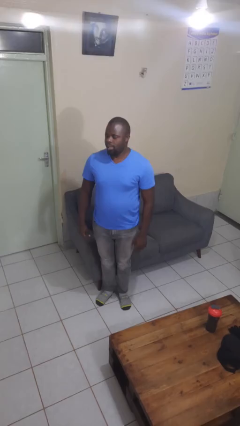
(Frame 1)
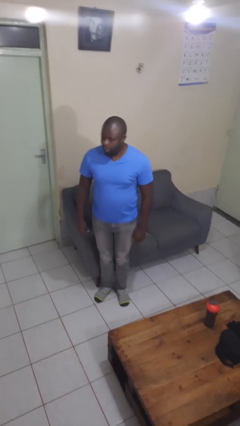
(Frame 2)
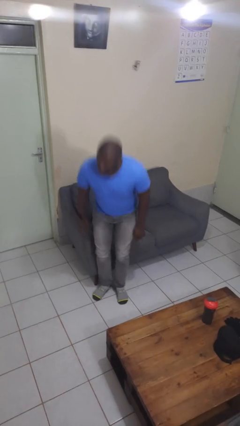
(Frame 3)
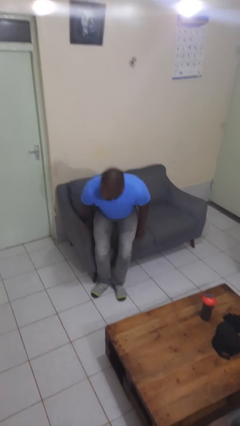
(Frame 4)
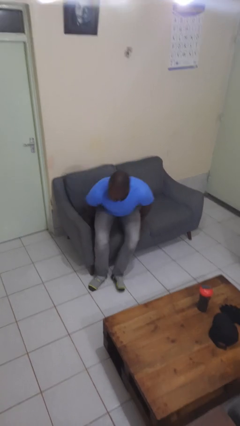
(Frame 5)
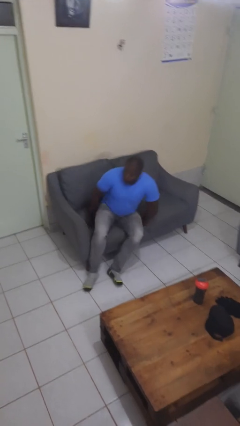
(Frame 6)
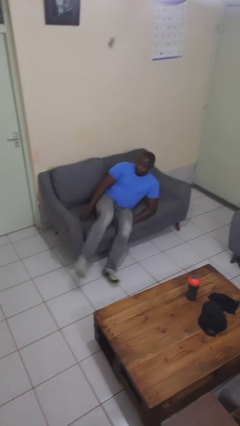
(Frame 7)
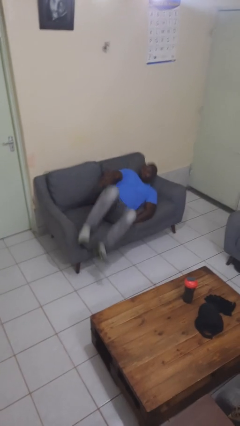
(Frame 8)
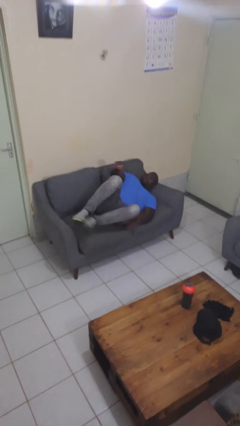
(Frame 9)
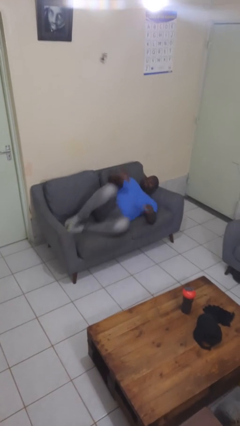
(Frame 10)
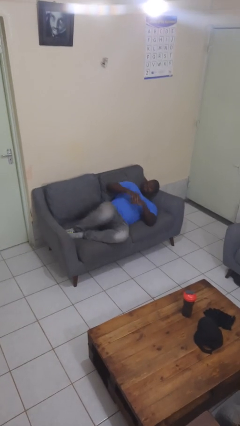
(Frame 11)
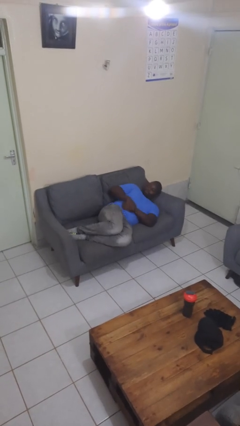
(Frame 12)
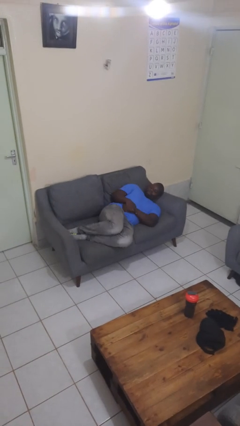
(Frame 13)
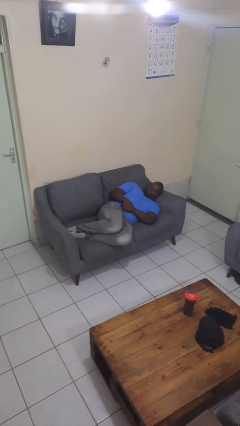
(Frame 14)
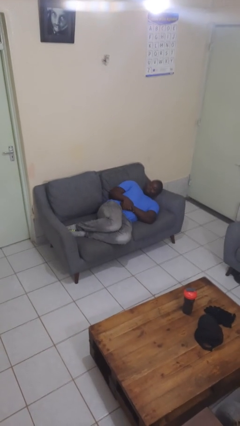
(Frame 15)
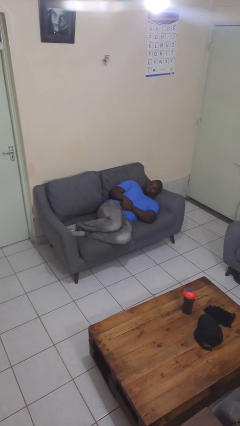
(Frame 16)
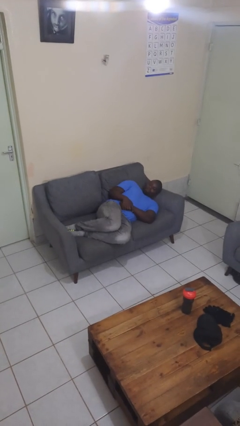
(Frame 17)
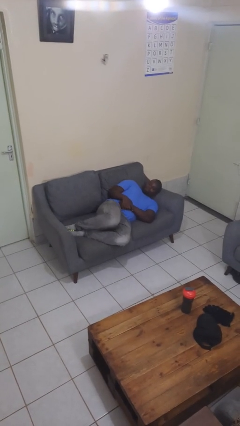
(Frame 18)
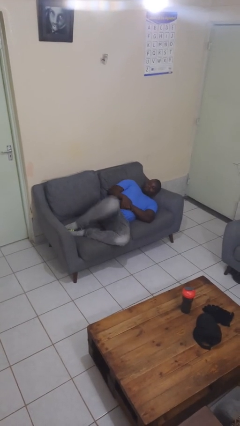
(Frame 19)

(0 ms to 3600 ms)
person lies down on couch

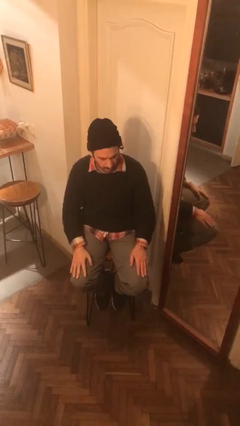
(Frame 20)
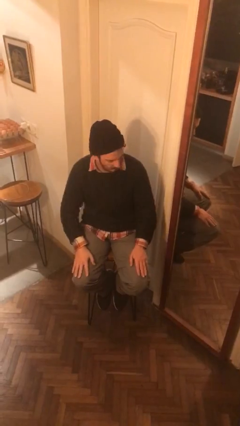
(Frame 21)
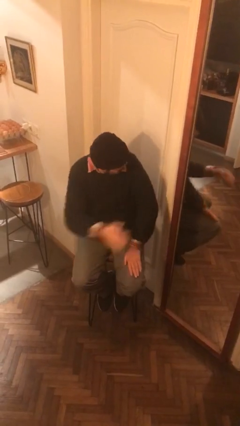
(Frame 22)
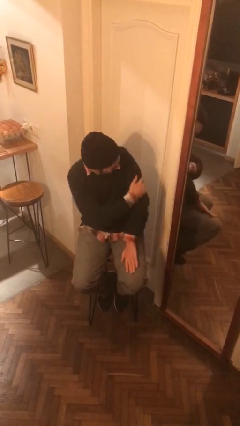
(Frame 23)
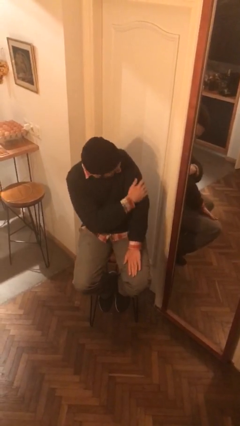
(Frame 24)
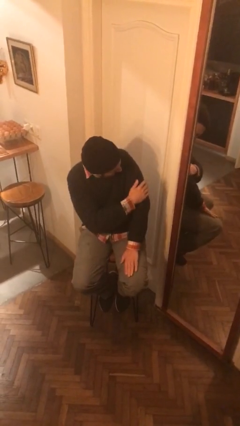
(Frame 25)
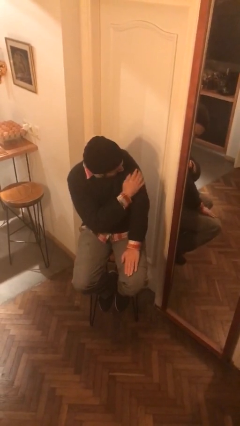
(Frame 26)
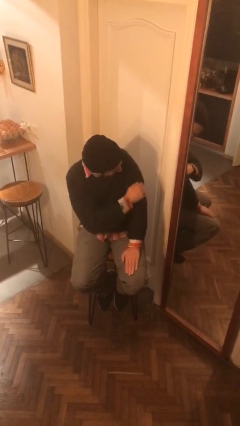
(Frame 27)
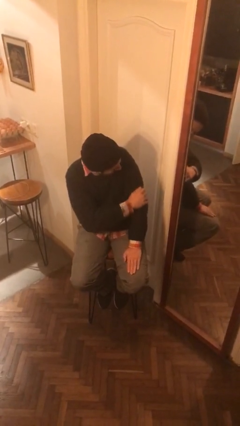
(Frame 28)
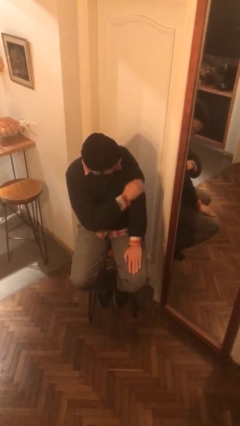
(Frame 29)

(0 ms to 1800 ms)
person swats bug

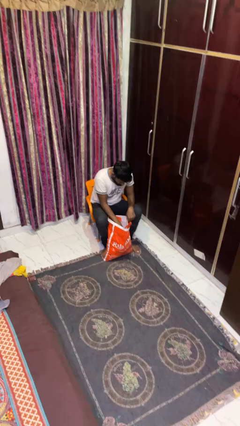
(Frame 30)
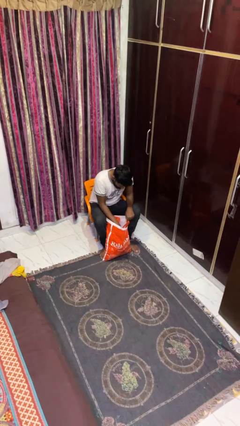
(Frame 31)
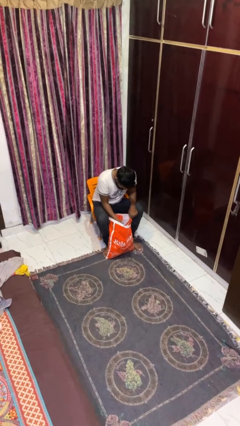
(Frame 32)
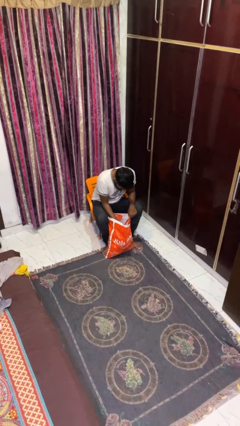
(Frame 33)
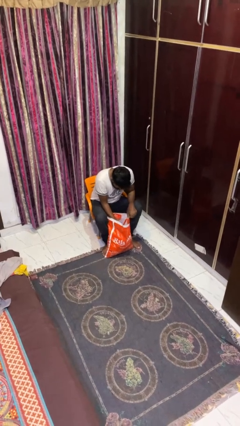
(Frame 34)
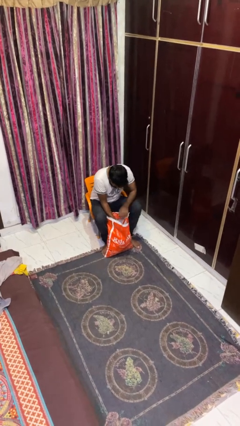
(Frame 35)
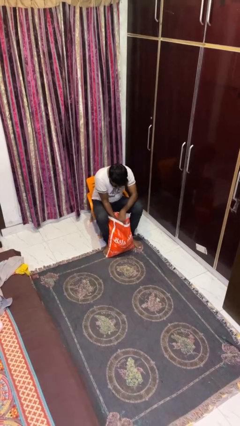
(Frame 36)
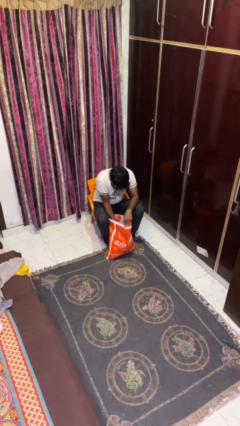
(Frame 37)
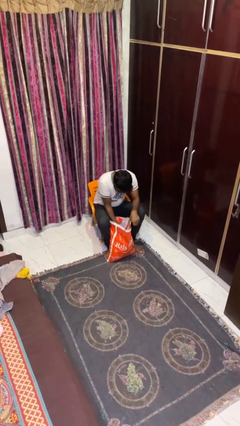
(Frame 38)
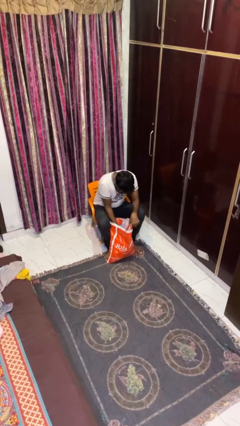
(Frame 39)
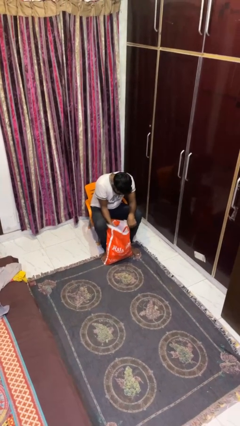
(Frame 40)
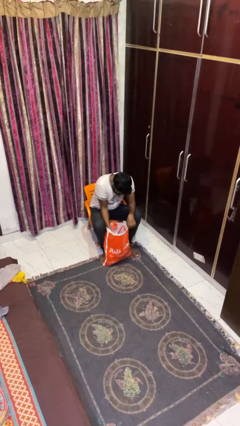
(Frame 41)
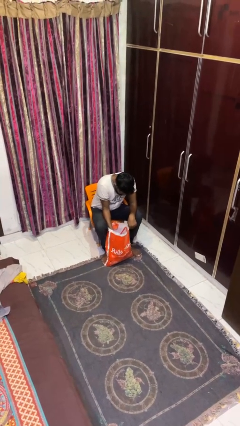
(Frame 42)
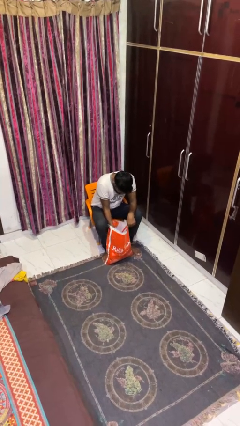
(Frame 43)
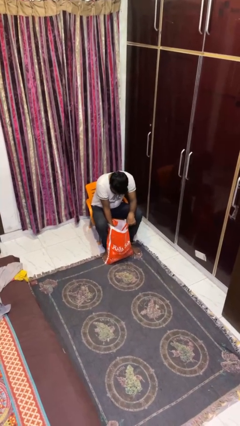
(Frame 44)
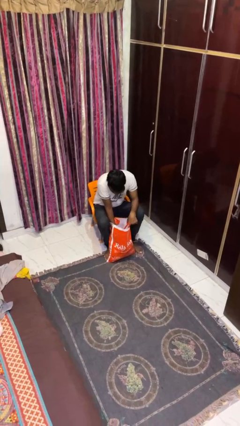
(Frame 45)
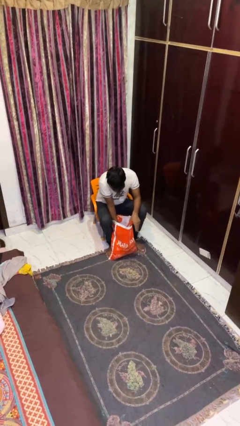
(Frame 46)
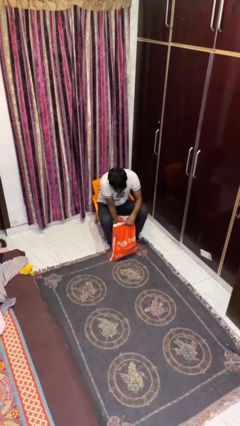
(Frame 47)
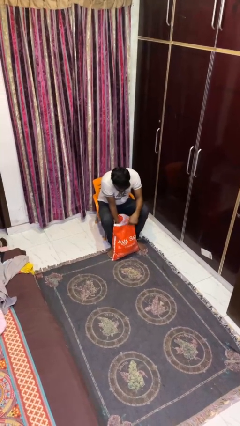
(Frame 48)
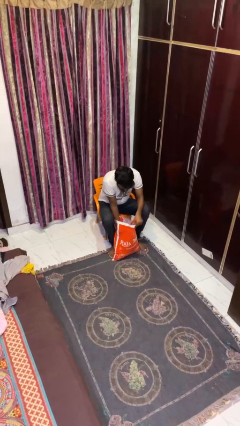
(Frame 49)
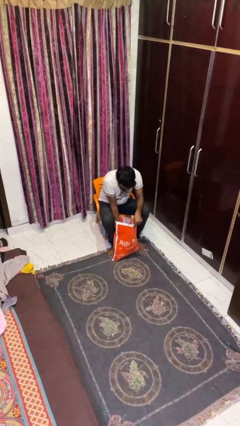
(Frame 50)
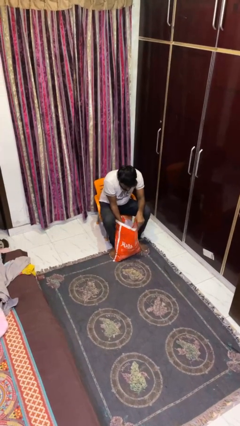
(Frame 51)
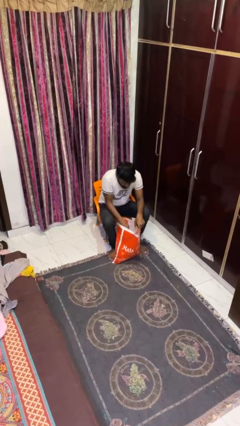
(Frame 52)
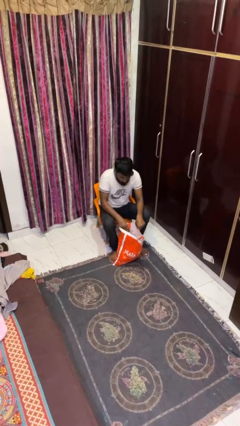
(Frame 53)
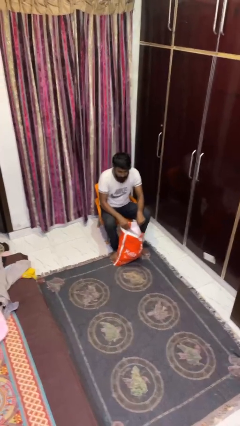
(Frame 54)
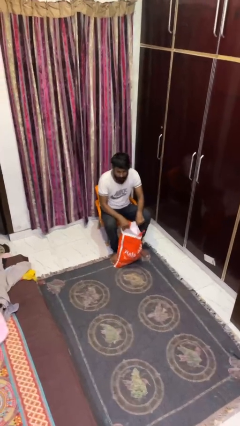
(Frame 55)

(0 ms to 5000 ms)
person searches in bag

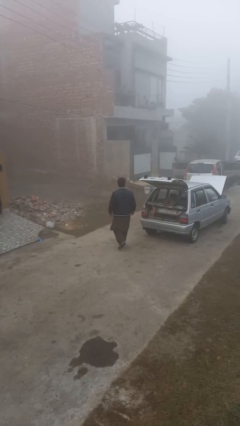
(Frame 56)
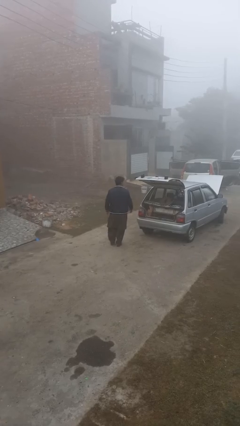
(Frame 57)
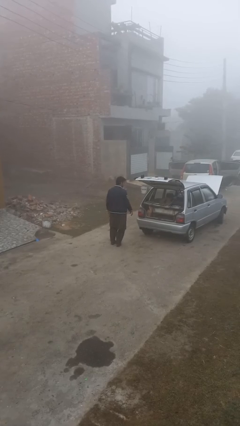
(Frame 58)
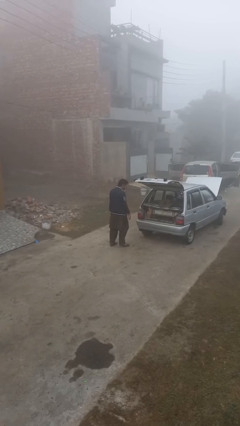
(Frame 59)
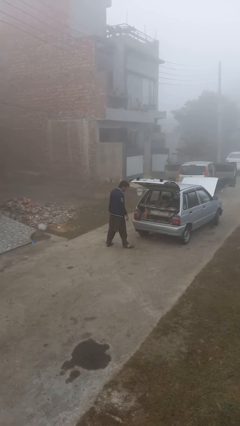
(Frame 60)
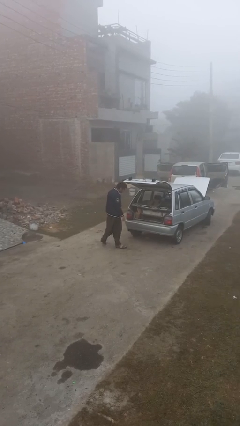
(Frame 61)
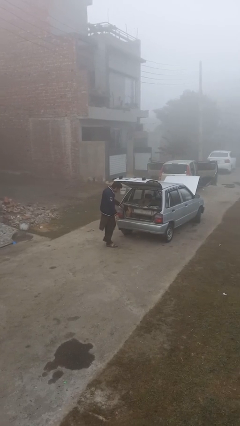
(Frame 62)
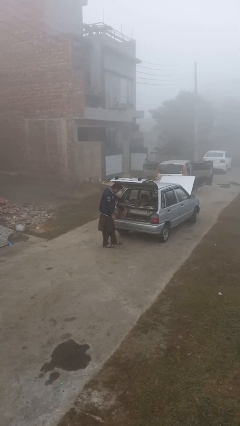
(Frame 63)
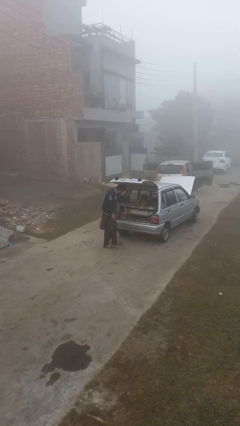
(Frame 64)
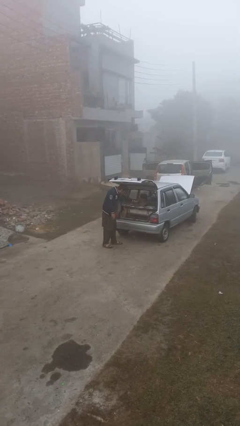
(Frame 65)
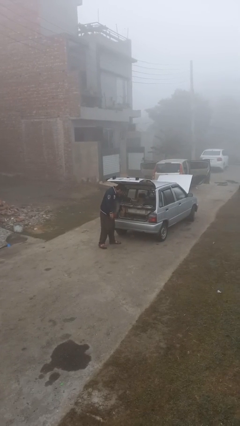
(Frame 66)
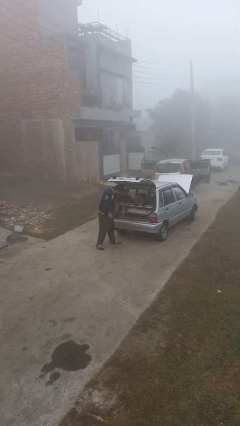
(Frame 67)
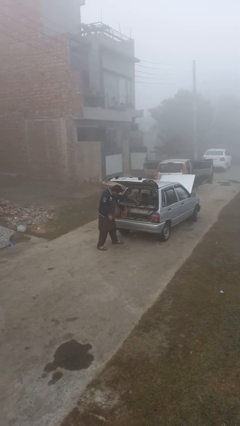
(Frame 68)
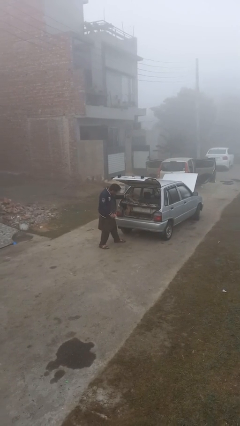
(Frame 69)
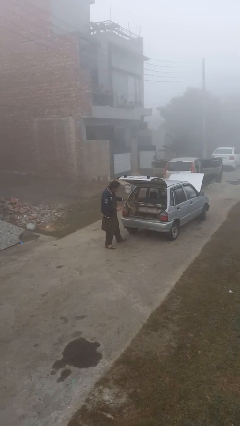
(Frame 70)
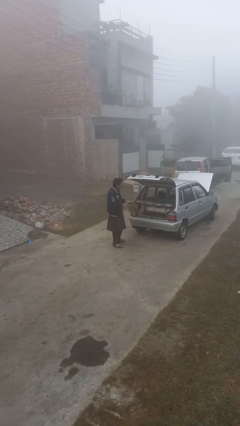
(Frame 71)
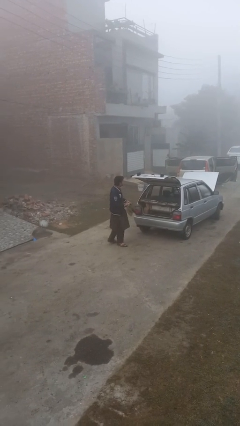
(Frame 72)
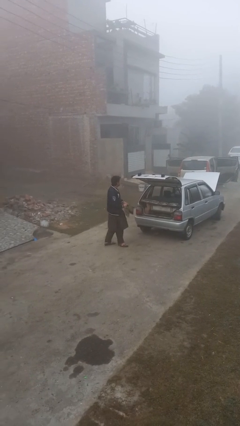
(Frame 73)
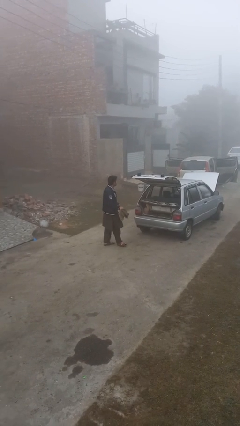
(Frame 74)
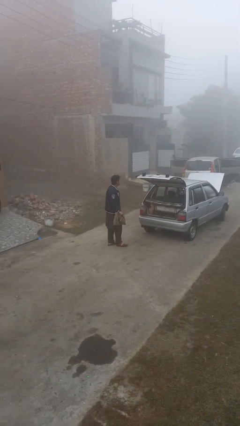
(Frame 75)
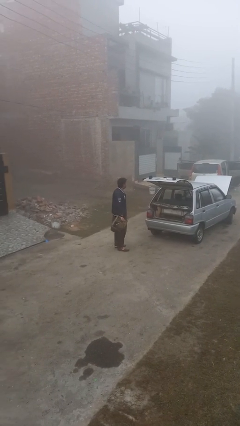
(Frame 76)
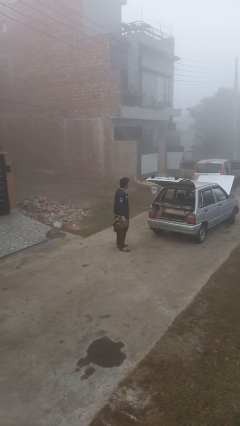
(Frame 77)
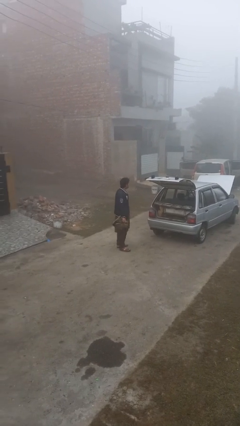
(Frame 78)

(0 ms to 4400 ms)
person unloads car

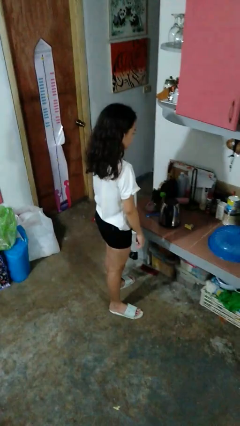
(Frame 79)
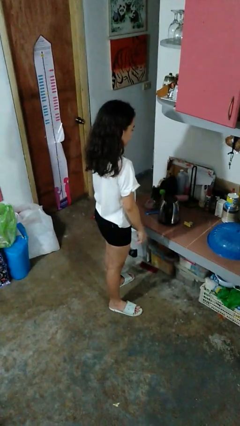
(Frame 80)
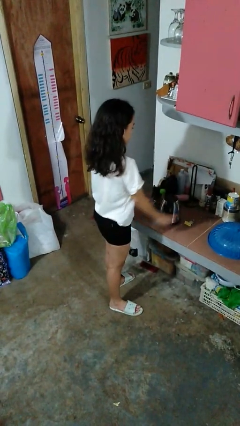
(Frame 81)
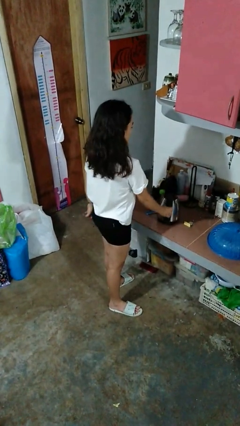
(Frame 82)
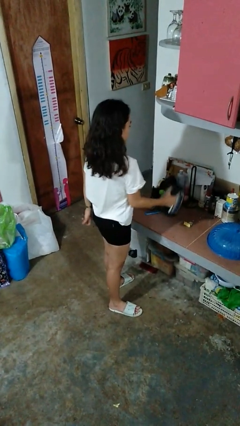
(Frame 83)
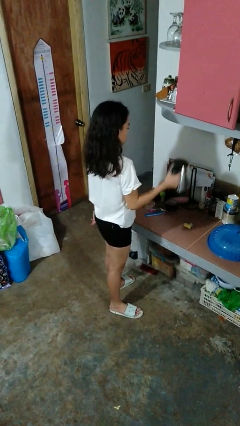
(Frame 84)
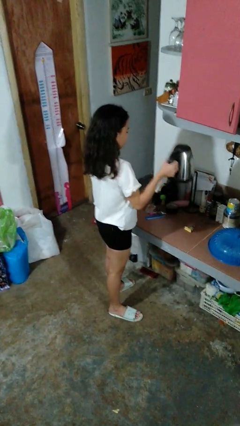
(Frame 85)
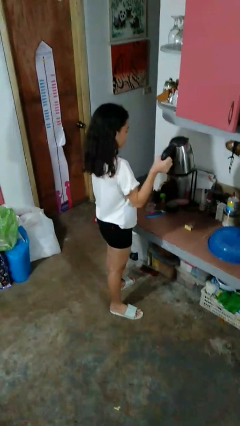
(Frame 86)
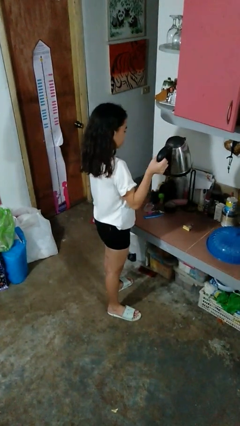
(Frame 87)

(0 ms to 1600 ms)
person picks up object from countertop

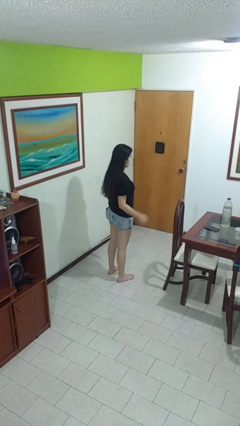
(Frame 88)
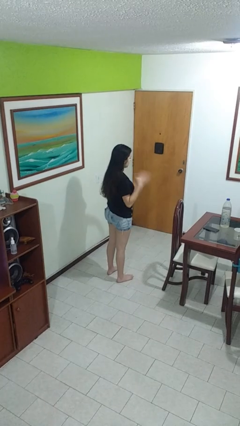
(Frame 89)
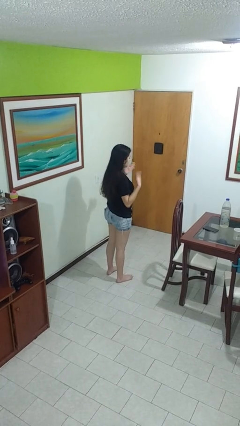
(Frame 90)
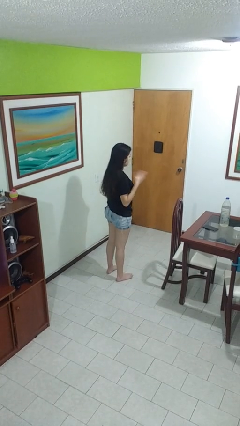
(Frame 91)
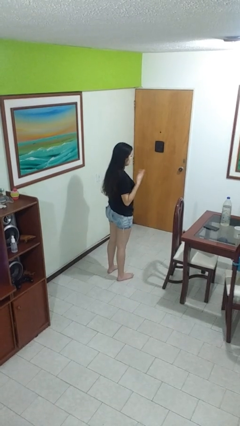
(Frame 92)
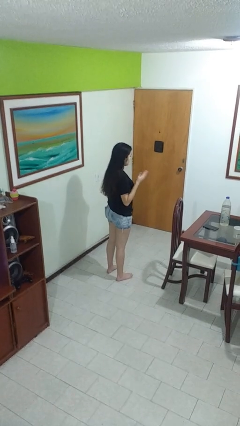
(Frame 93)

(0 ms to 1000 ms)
person drums on chest

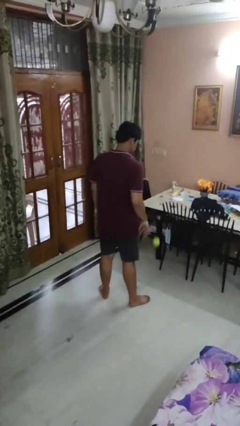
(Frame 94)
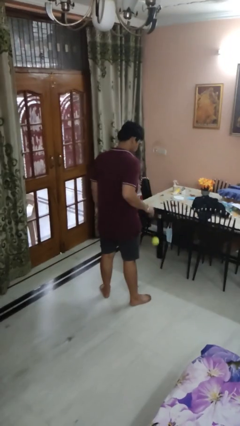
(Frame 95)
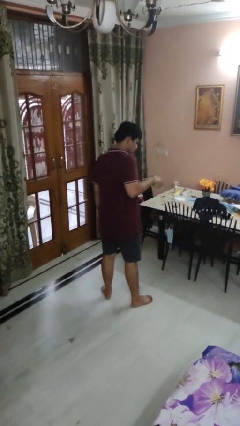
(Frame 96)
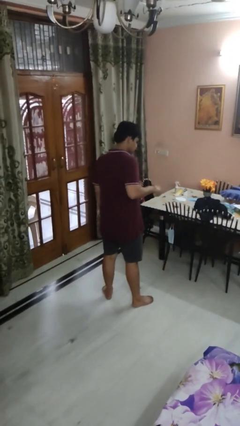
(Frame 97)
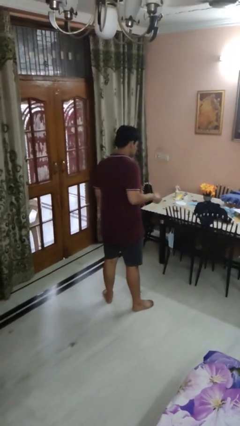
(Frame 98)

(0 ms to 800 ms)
person bounces ball on floor
